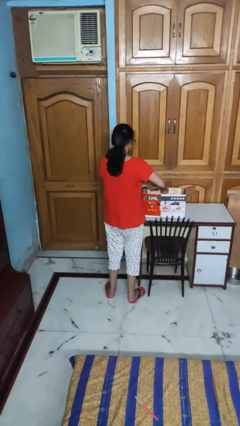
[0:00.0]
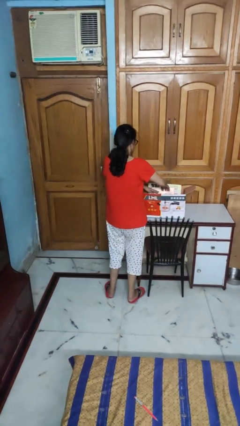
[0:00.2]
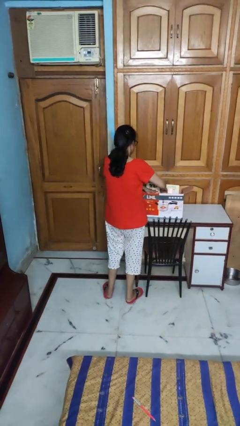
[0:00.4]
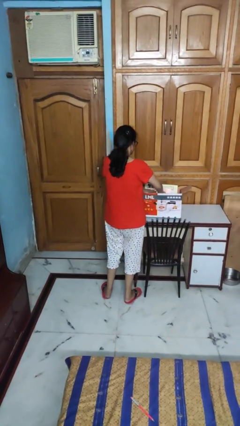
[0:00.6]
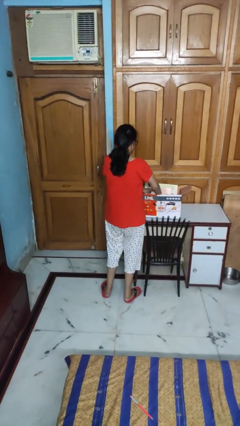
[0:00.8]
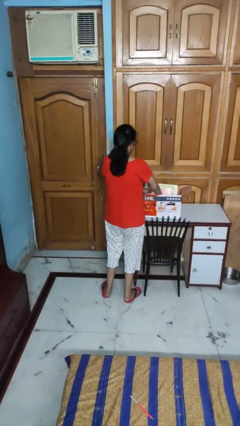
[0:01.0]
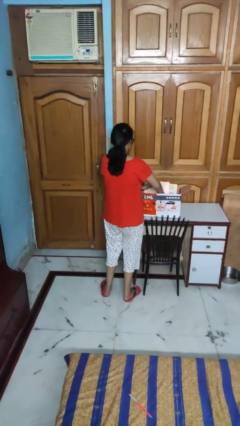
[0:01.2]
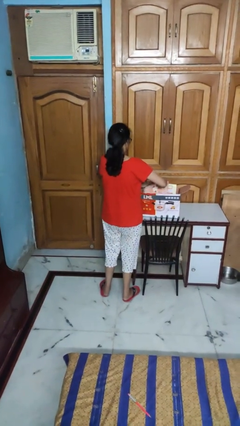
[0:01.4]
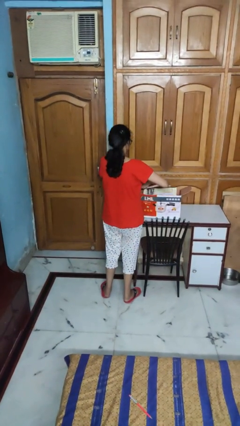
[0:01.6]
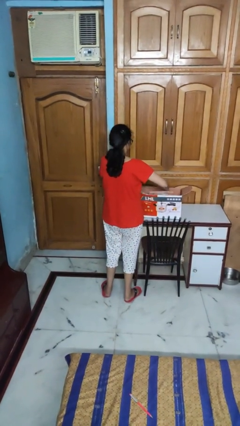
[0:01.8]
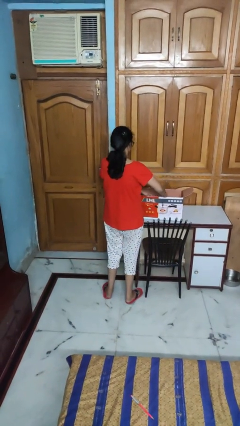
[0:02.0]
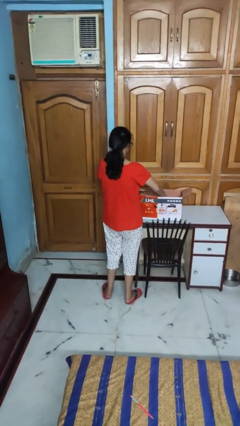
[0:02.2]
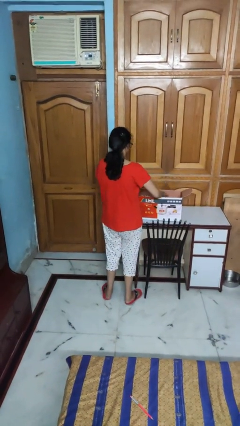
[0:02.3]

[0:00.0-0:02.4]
person searches in box

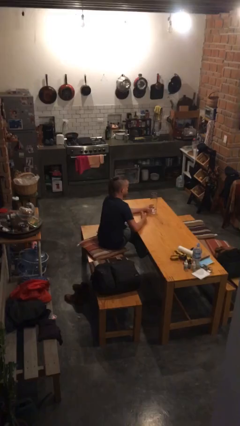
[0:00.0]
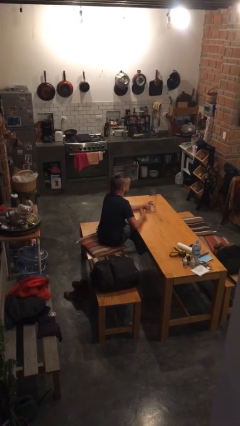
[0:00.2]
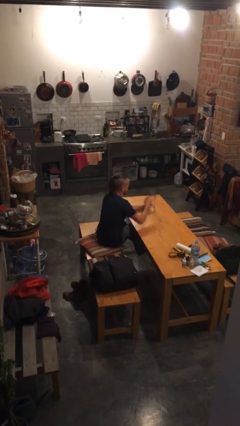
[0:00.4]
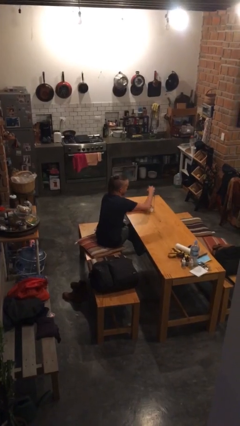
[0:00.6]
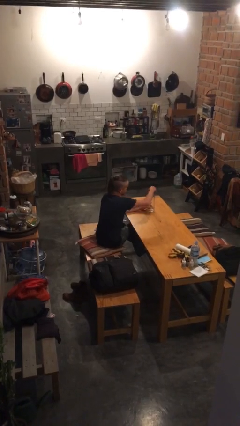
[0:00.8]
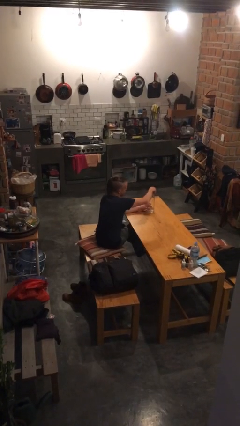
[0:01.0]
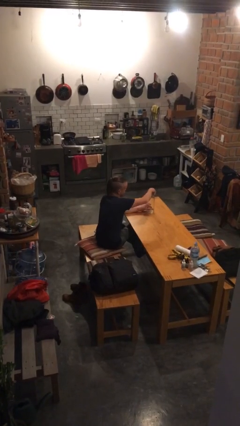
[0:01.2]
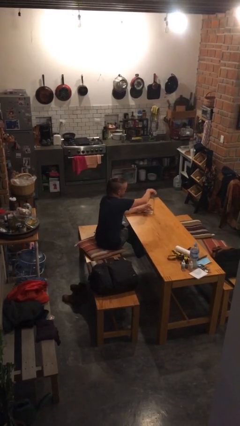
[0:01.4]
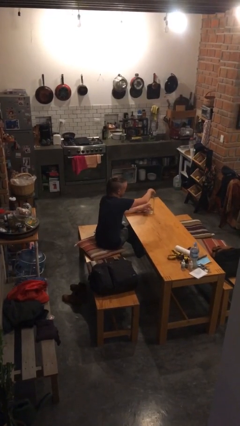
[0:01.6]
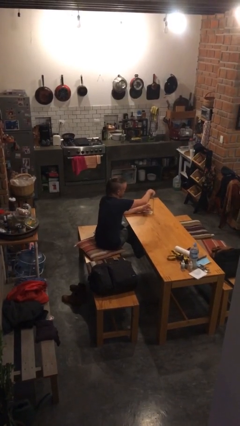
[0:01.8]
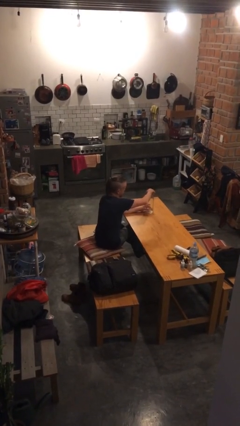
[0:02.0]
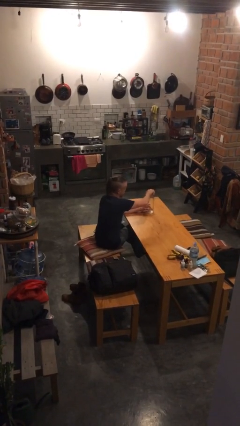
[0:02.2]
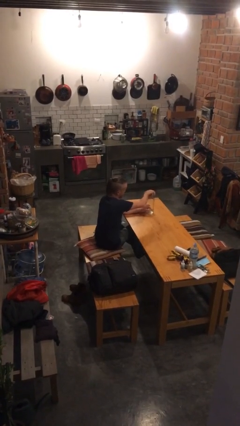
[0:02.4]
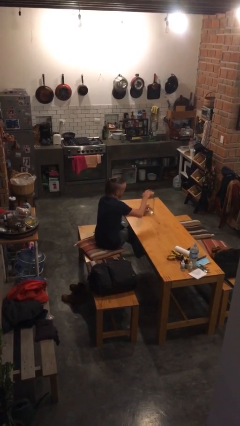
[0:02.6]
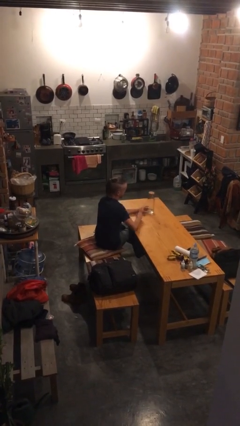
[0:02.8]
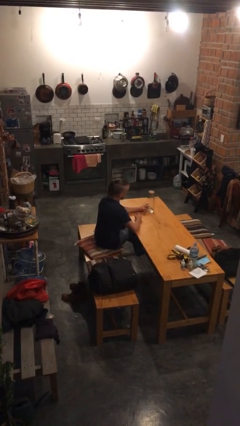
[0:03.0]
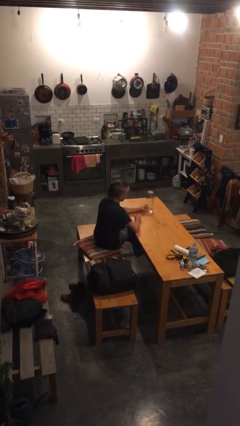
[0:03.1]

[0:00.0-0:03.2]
person closes jar

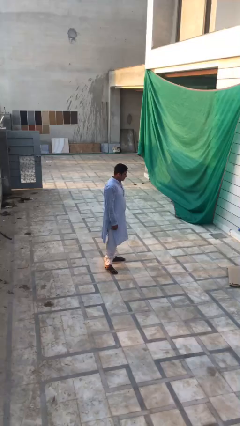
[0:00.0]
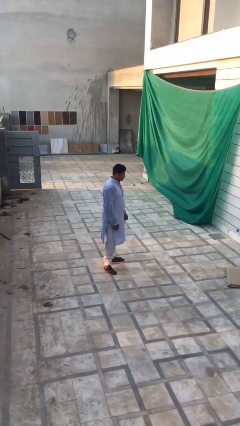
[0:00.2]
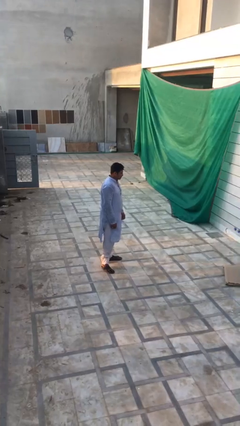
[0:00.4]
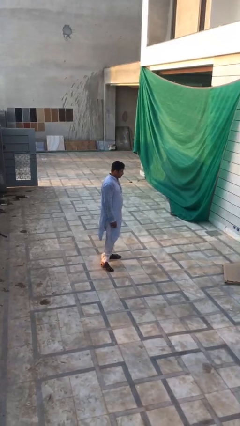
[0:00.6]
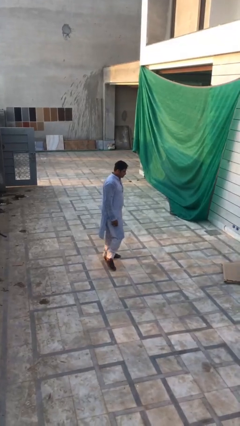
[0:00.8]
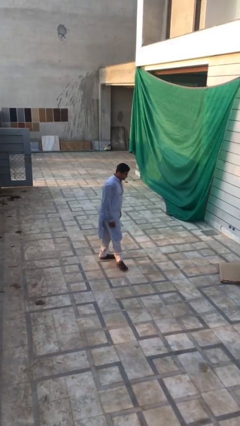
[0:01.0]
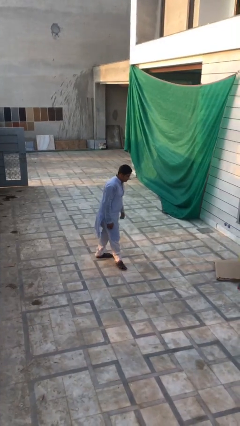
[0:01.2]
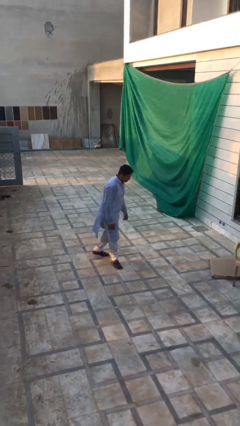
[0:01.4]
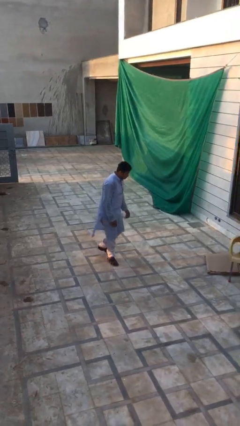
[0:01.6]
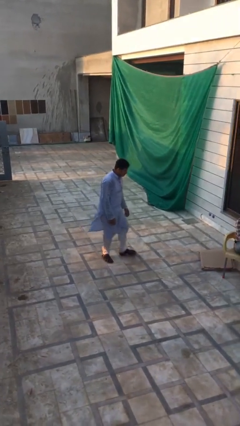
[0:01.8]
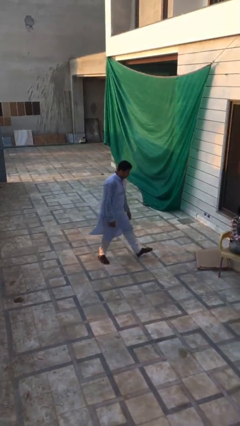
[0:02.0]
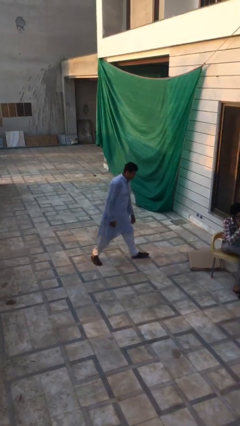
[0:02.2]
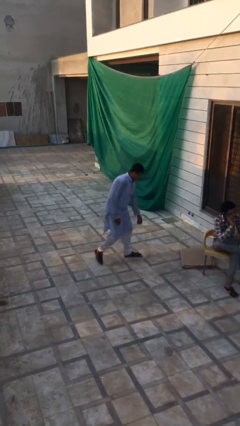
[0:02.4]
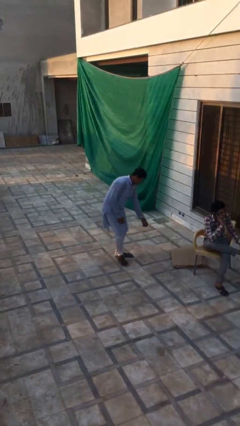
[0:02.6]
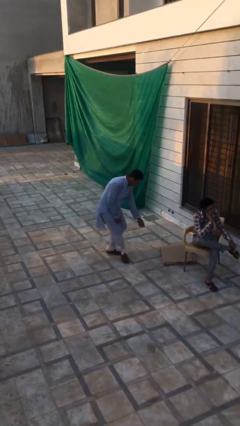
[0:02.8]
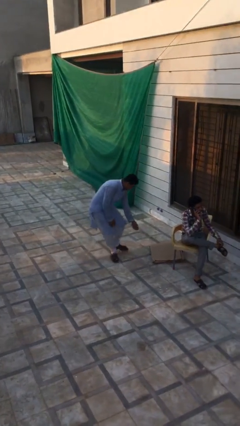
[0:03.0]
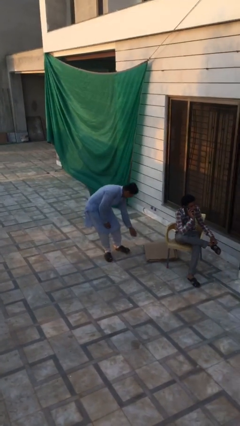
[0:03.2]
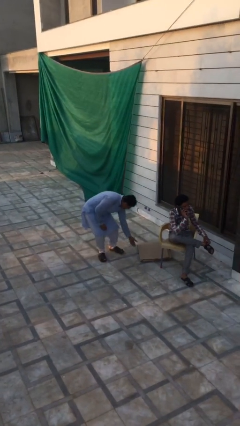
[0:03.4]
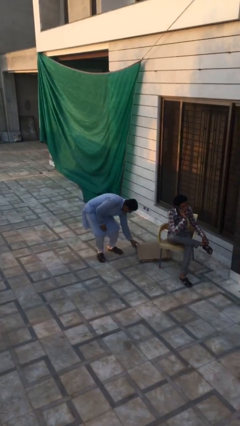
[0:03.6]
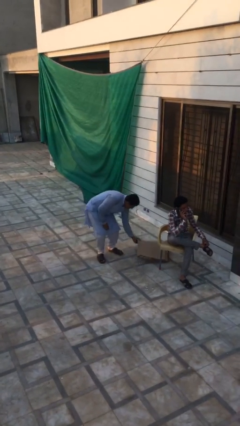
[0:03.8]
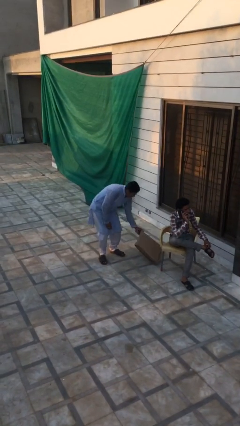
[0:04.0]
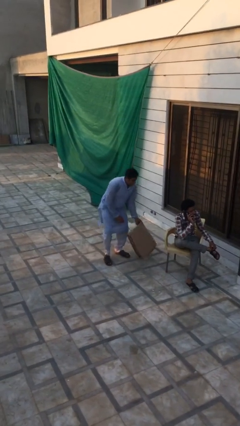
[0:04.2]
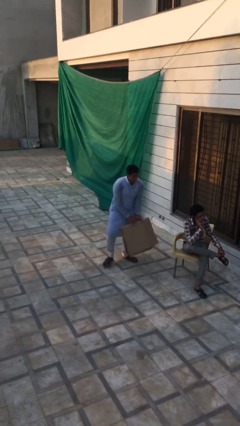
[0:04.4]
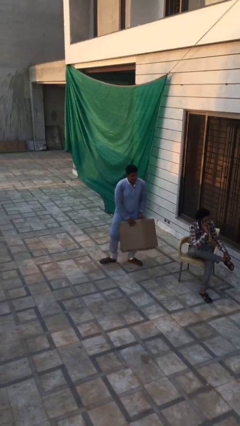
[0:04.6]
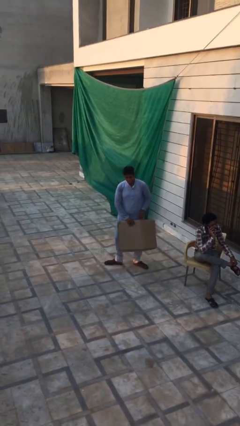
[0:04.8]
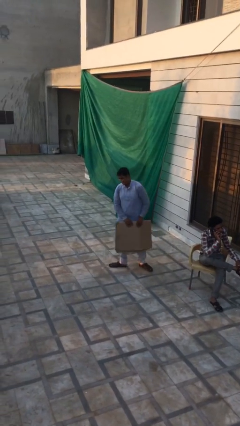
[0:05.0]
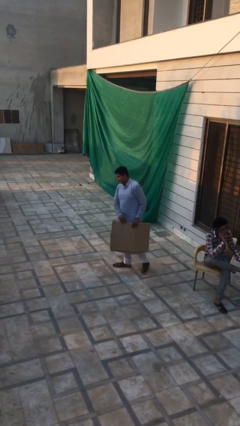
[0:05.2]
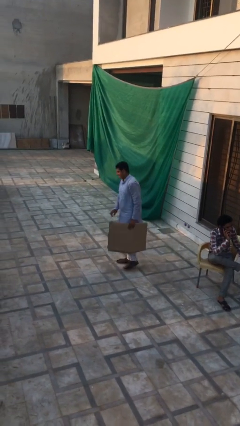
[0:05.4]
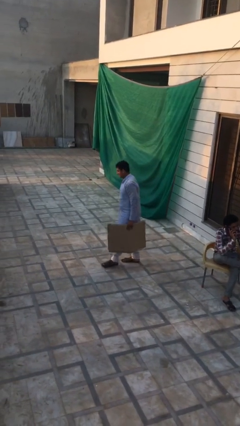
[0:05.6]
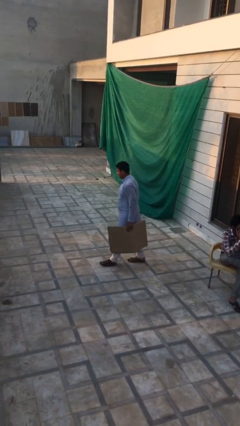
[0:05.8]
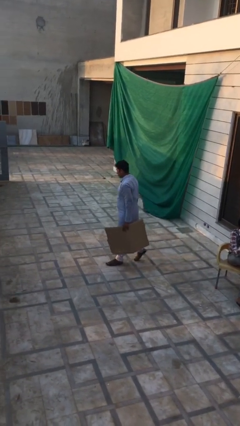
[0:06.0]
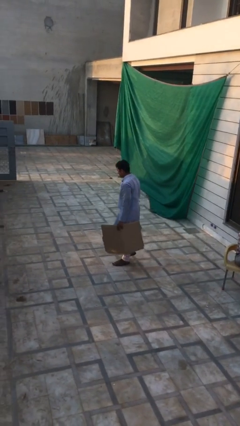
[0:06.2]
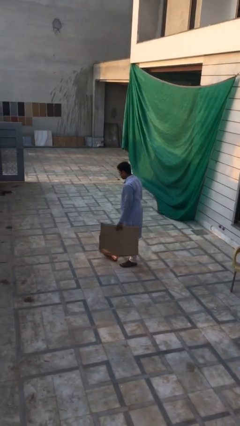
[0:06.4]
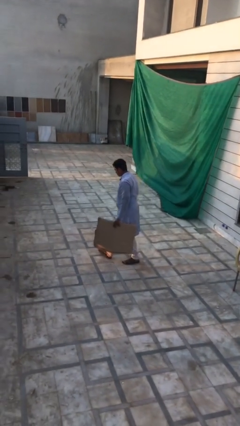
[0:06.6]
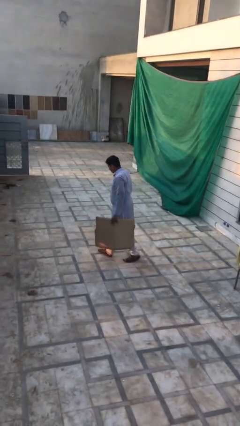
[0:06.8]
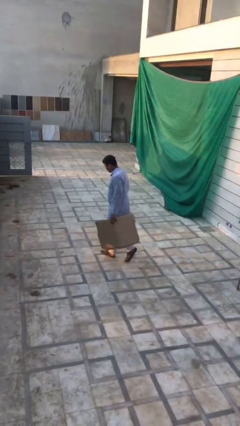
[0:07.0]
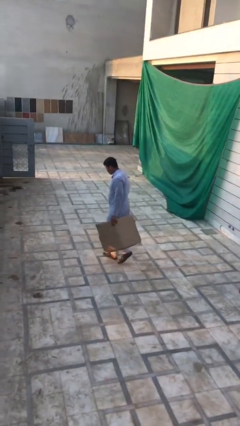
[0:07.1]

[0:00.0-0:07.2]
person steals object from person

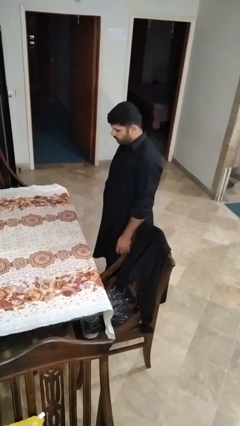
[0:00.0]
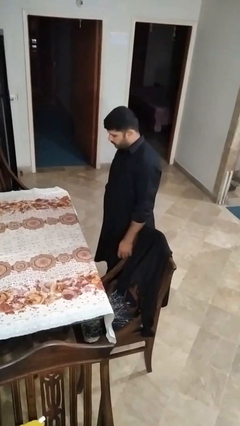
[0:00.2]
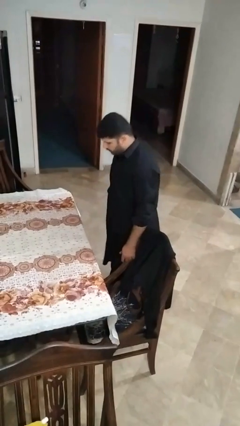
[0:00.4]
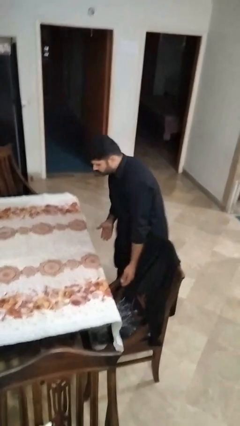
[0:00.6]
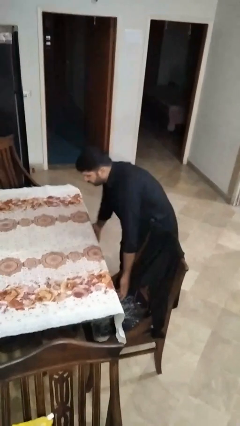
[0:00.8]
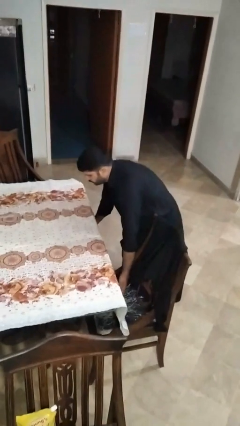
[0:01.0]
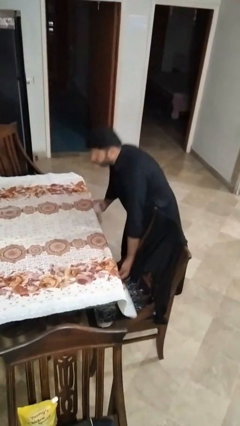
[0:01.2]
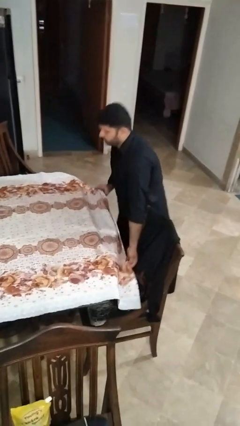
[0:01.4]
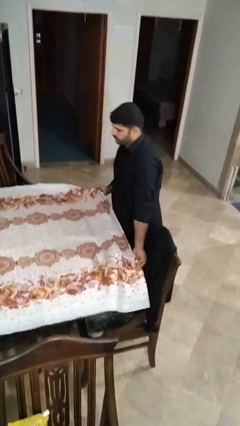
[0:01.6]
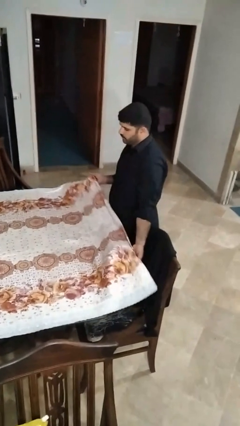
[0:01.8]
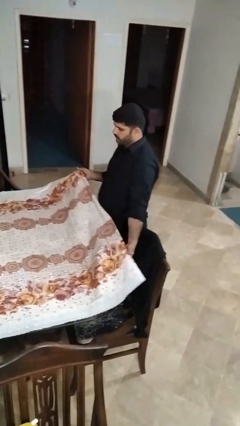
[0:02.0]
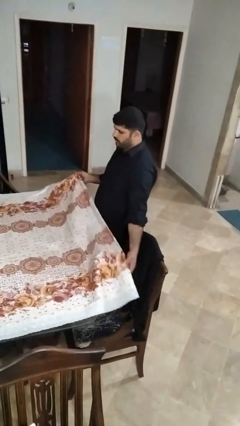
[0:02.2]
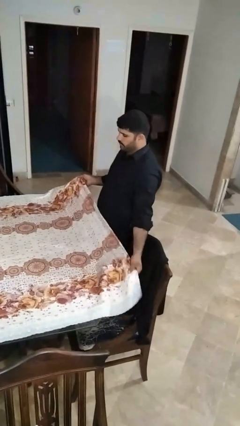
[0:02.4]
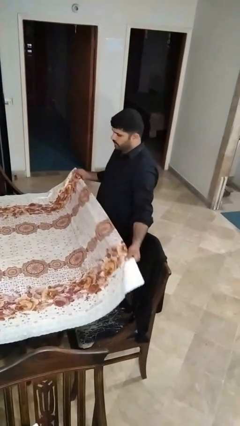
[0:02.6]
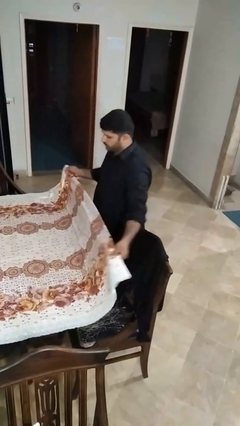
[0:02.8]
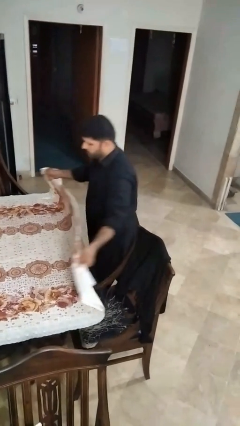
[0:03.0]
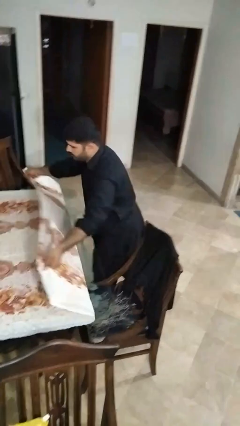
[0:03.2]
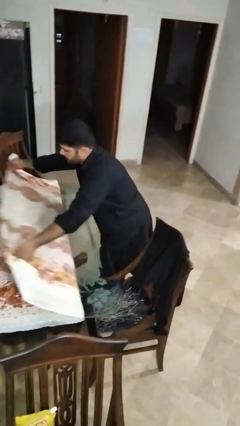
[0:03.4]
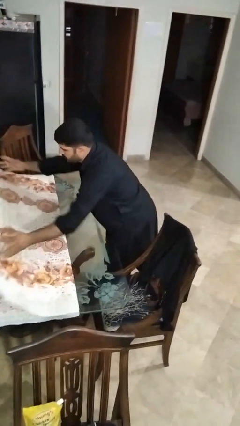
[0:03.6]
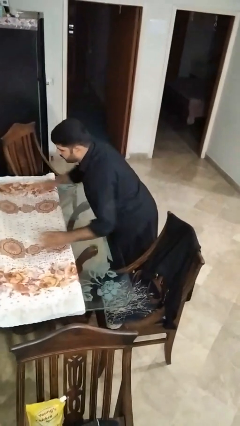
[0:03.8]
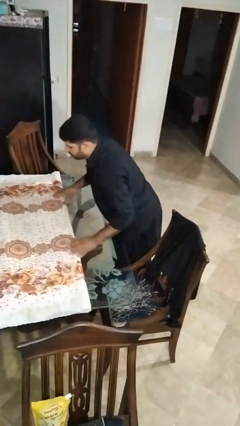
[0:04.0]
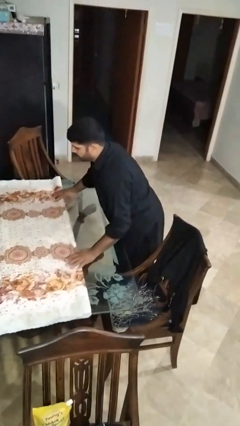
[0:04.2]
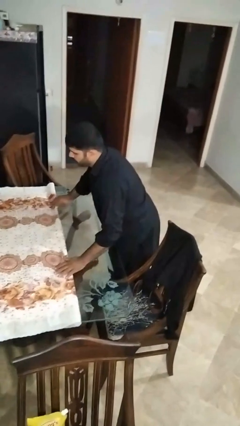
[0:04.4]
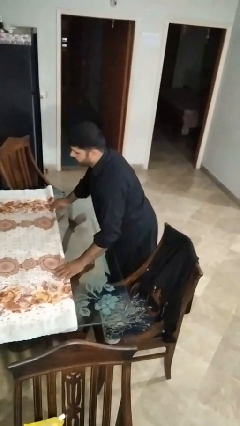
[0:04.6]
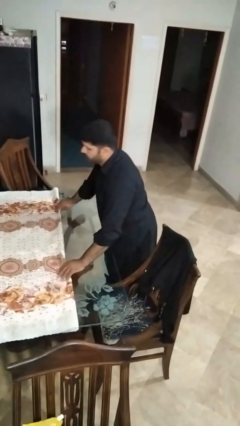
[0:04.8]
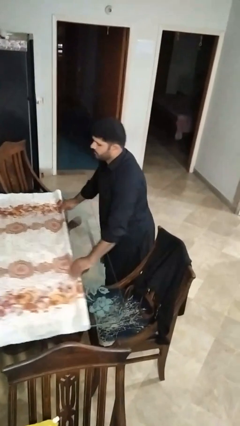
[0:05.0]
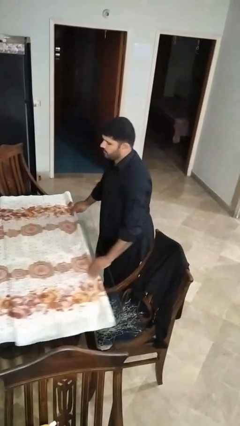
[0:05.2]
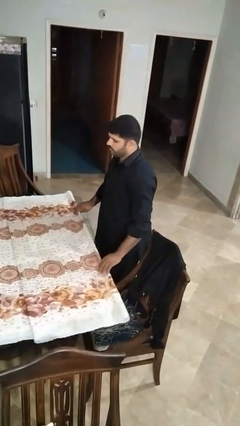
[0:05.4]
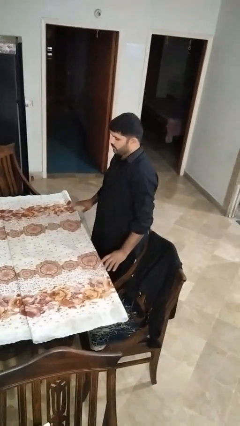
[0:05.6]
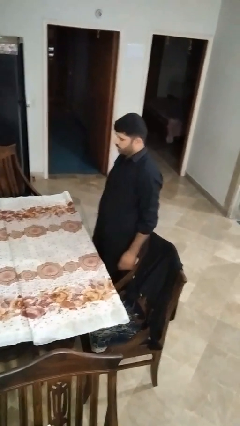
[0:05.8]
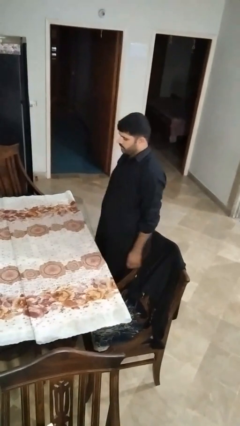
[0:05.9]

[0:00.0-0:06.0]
person folds tablecloth
